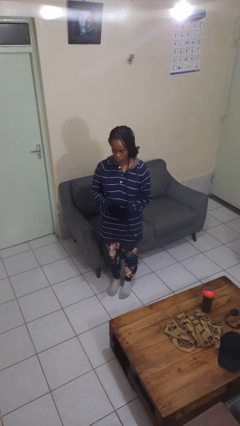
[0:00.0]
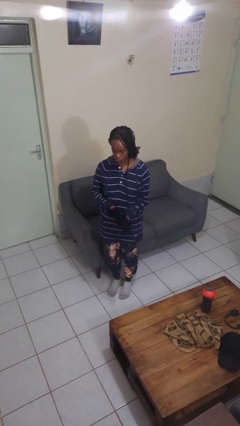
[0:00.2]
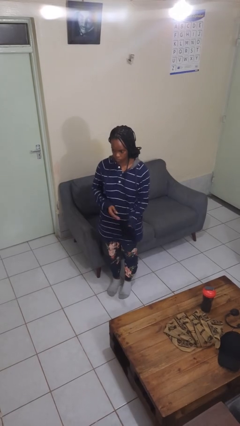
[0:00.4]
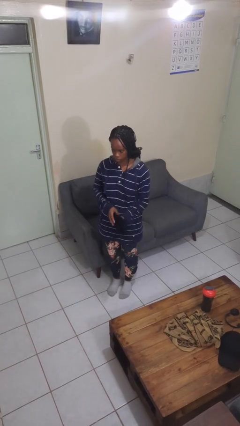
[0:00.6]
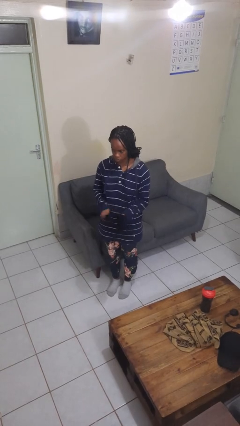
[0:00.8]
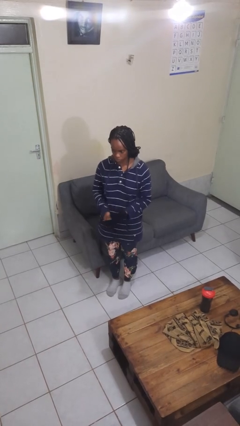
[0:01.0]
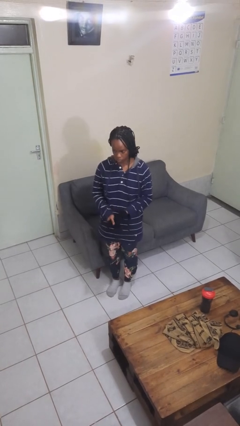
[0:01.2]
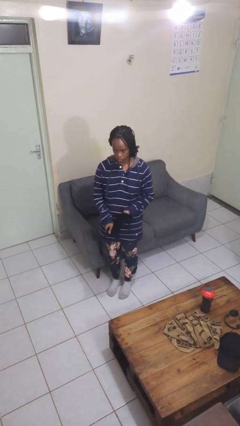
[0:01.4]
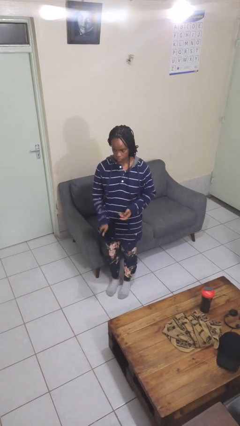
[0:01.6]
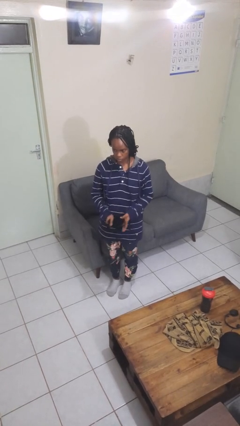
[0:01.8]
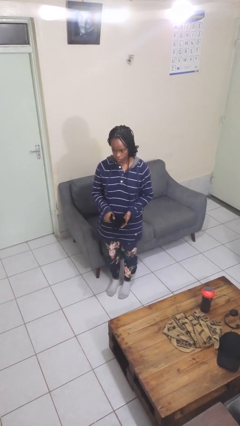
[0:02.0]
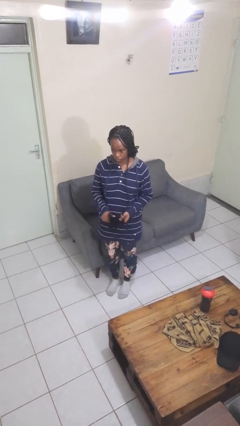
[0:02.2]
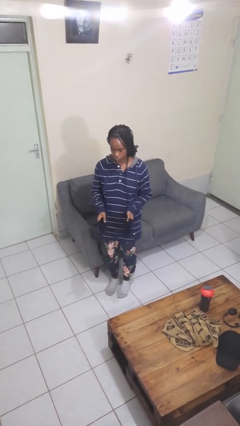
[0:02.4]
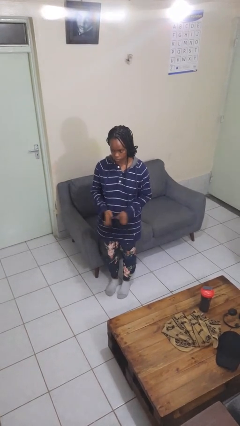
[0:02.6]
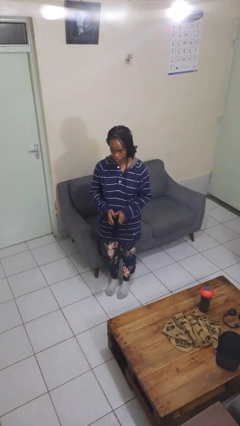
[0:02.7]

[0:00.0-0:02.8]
person takes off gloves

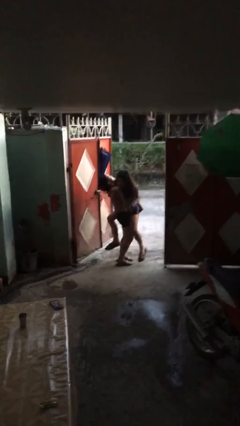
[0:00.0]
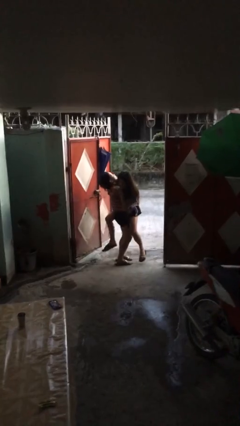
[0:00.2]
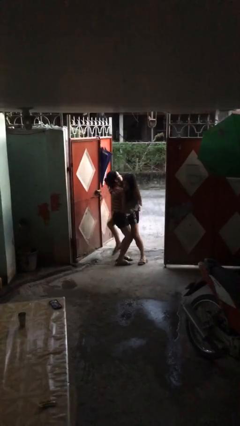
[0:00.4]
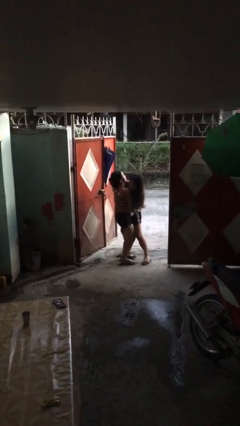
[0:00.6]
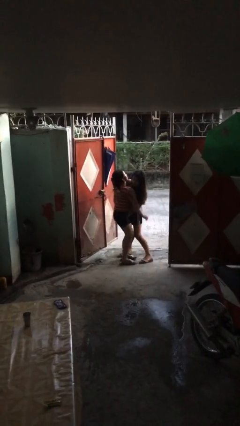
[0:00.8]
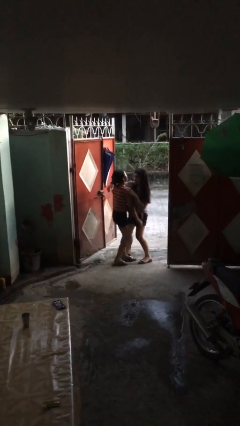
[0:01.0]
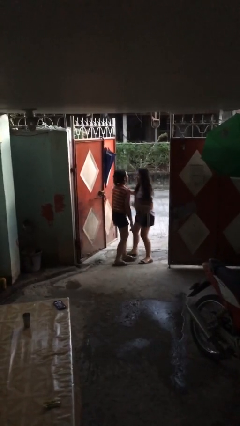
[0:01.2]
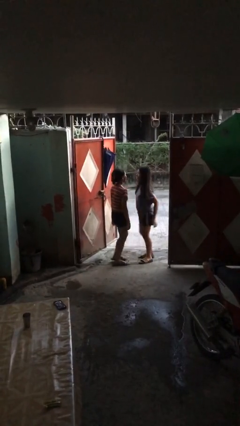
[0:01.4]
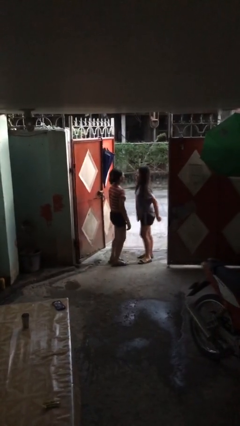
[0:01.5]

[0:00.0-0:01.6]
person puts down person

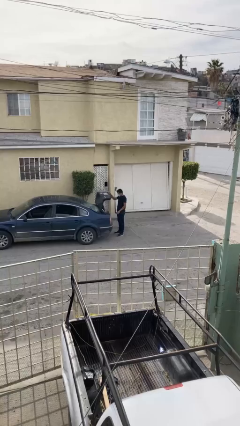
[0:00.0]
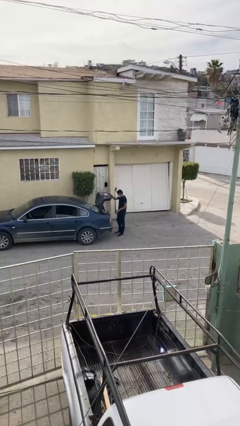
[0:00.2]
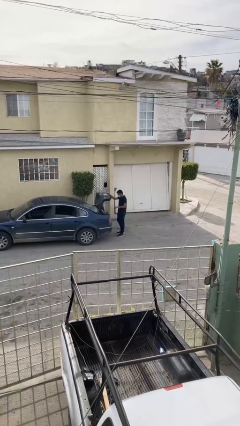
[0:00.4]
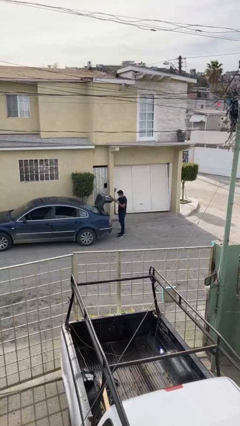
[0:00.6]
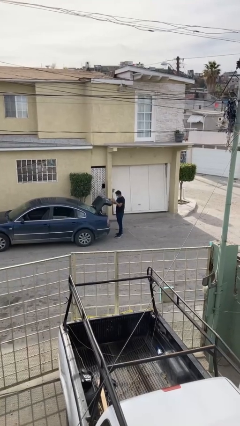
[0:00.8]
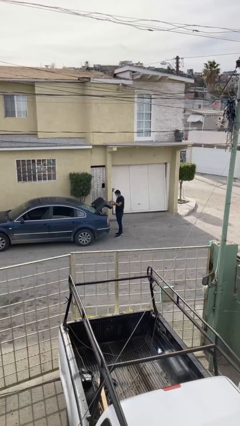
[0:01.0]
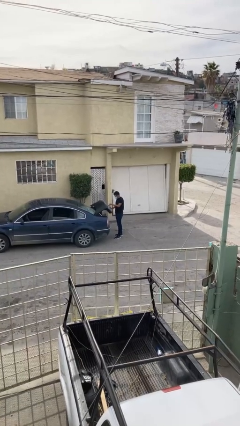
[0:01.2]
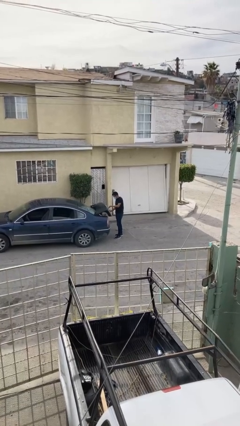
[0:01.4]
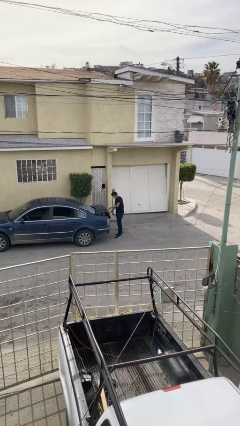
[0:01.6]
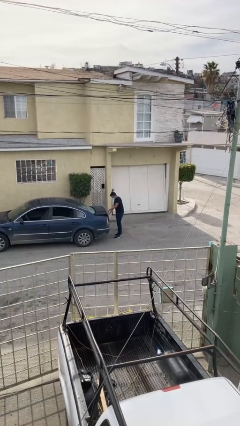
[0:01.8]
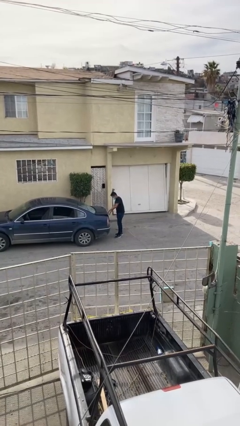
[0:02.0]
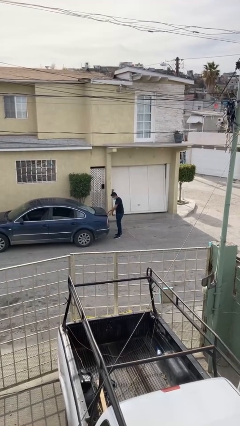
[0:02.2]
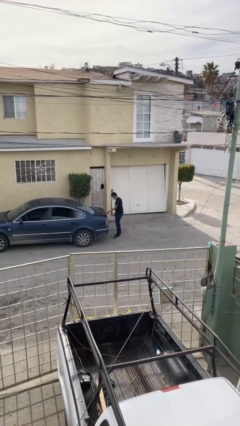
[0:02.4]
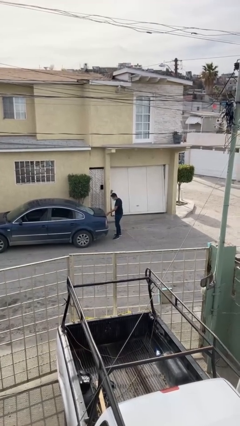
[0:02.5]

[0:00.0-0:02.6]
person closes car trunk

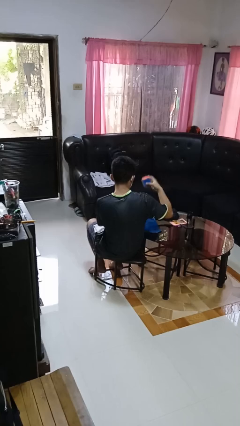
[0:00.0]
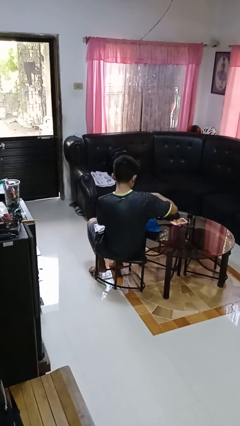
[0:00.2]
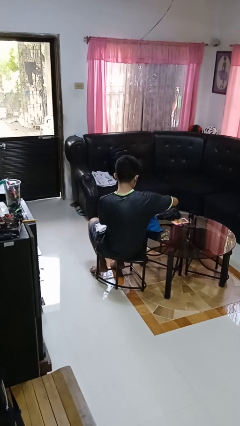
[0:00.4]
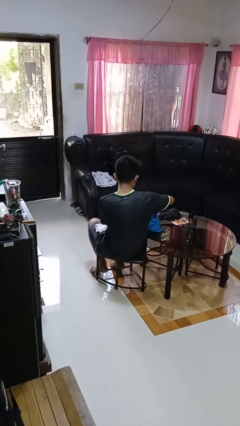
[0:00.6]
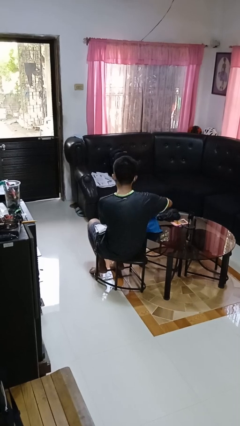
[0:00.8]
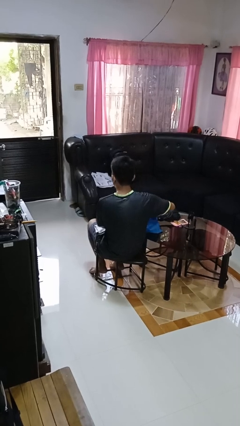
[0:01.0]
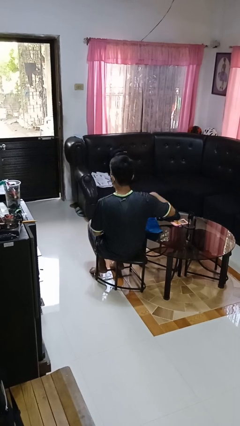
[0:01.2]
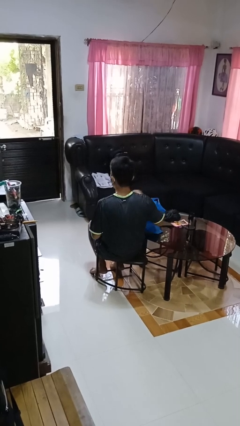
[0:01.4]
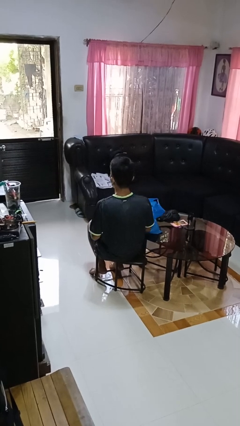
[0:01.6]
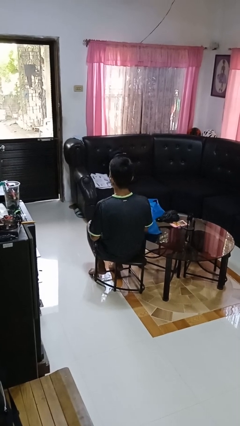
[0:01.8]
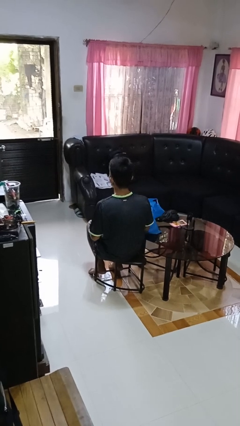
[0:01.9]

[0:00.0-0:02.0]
person puts object into bag

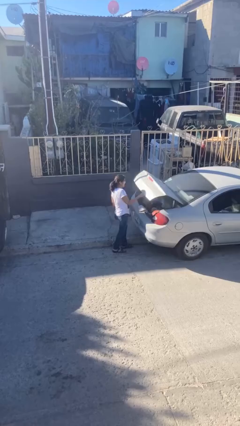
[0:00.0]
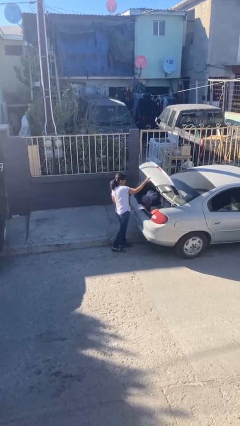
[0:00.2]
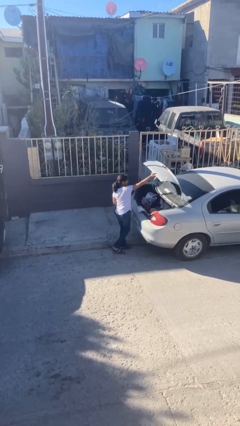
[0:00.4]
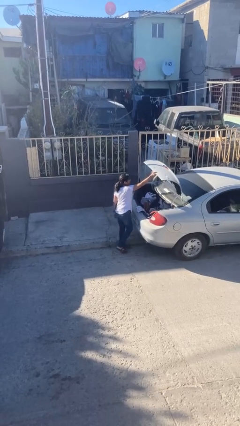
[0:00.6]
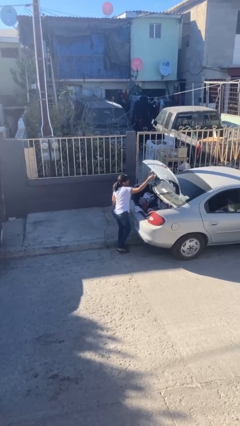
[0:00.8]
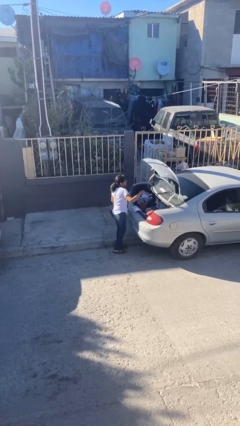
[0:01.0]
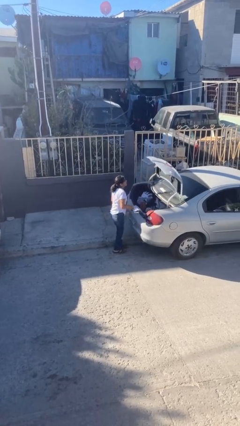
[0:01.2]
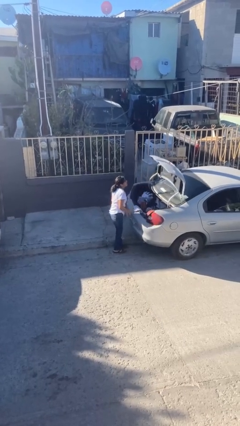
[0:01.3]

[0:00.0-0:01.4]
person opens car trunk

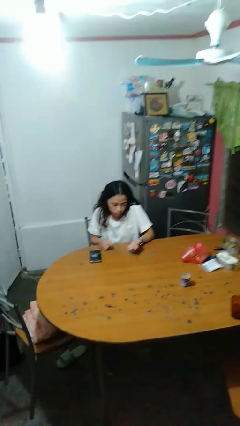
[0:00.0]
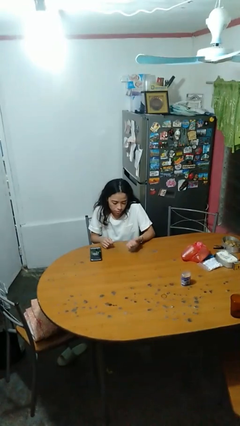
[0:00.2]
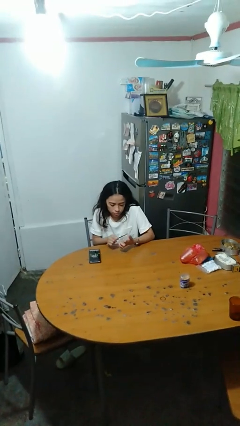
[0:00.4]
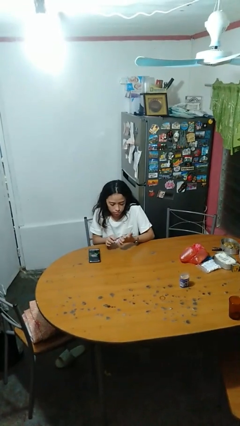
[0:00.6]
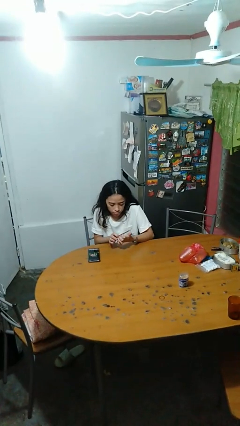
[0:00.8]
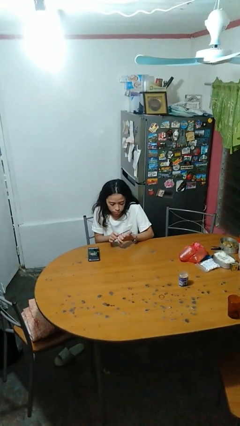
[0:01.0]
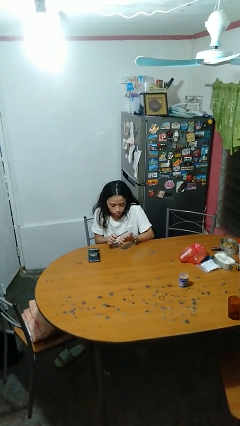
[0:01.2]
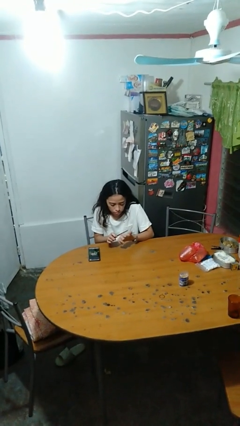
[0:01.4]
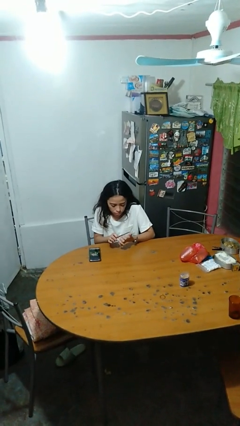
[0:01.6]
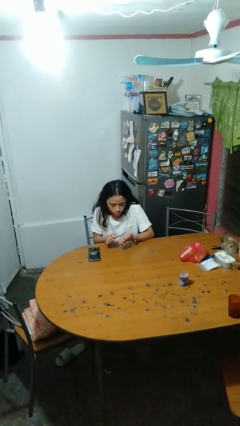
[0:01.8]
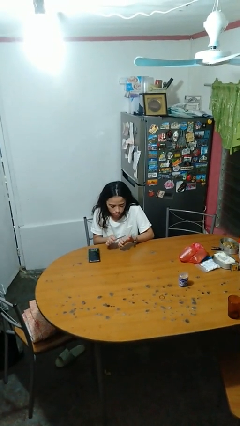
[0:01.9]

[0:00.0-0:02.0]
person files fingernails

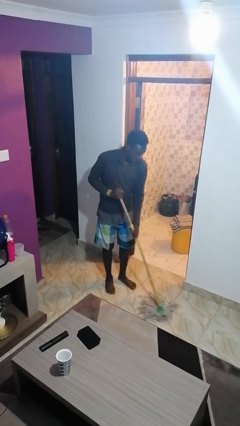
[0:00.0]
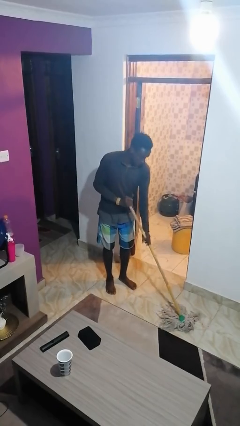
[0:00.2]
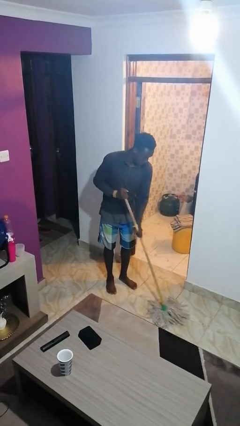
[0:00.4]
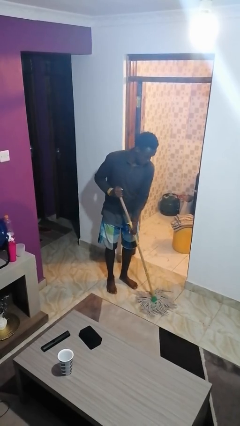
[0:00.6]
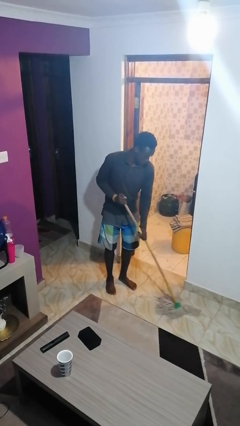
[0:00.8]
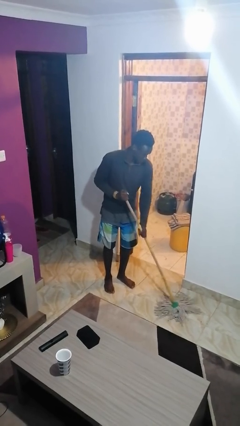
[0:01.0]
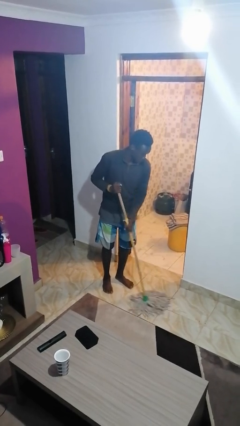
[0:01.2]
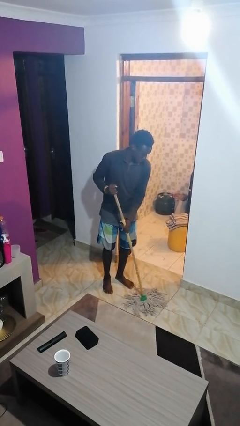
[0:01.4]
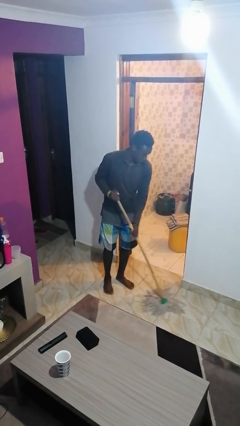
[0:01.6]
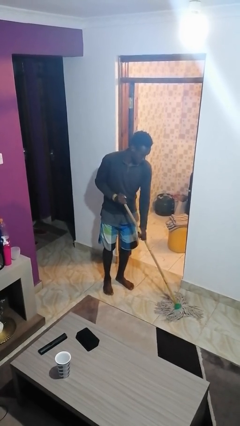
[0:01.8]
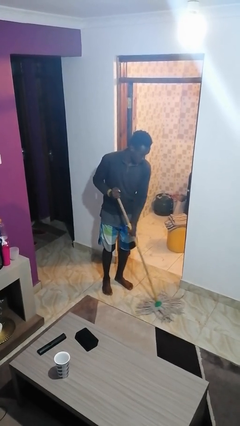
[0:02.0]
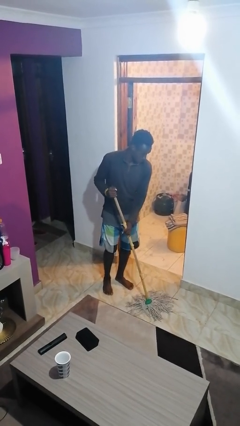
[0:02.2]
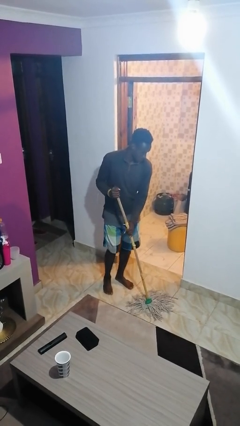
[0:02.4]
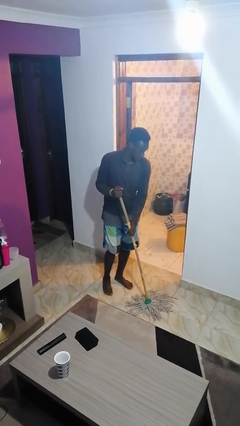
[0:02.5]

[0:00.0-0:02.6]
person mops

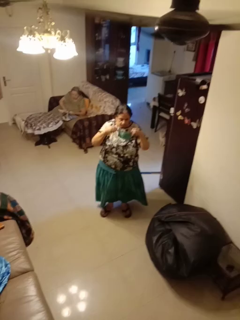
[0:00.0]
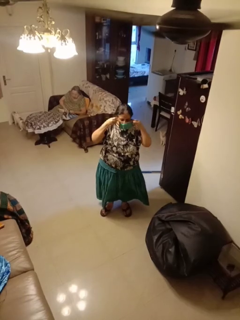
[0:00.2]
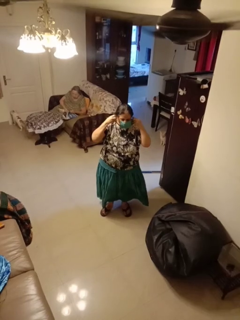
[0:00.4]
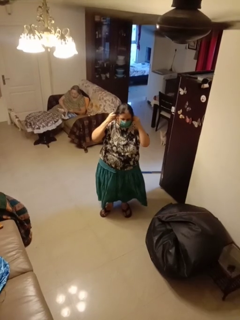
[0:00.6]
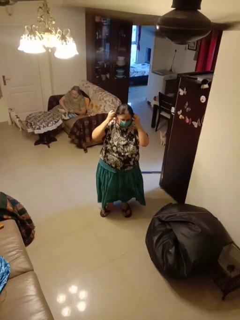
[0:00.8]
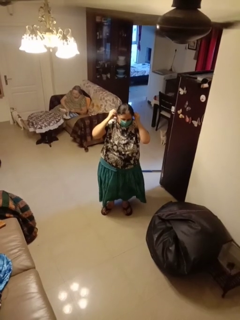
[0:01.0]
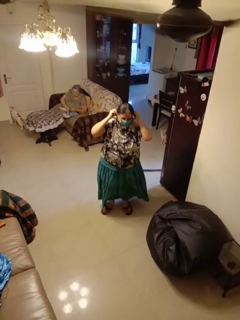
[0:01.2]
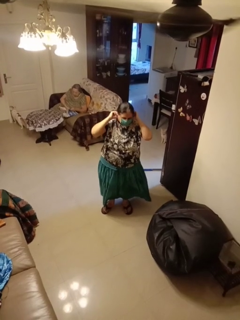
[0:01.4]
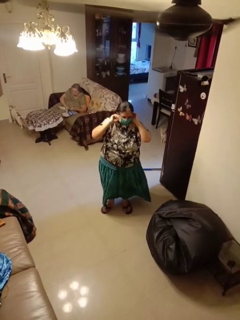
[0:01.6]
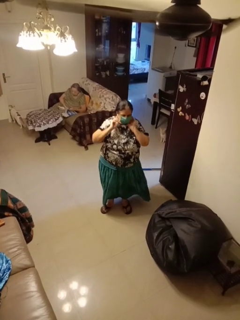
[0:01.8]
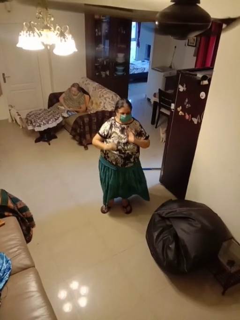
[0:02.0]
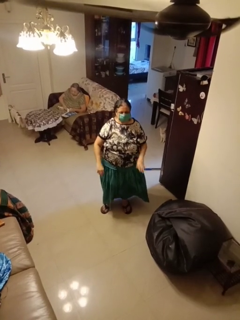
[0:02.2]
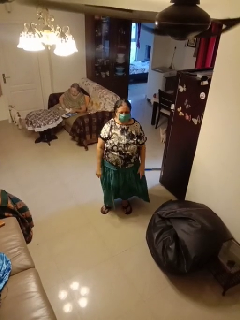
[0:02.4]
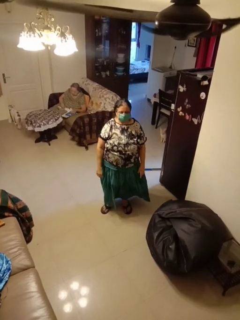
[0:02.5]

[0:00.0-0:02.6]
person puts on facemask

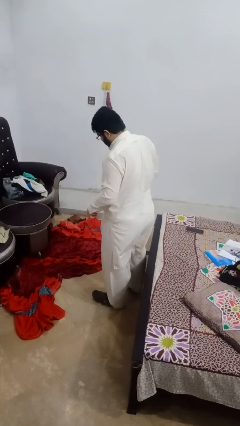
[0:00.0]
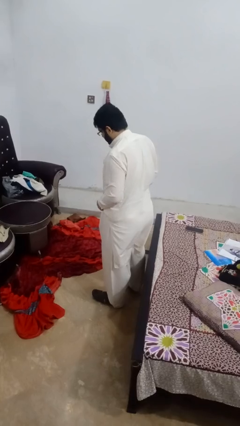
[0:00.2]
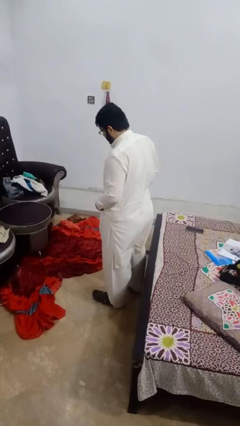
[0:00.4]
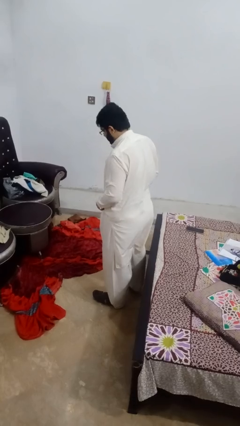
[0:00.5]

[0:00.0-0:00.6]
person untucks shirt
